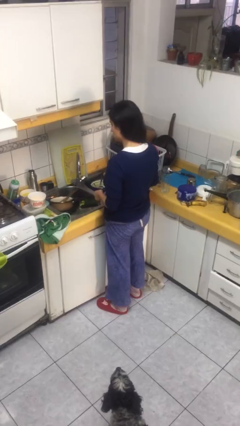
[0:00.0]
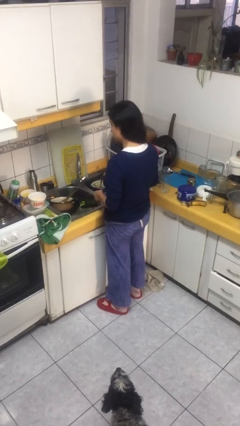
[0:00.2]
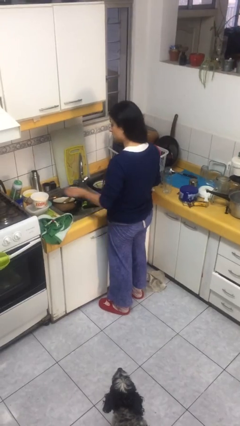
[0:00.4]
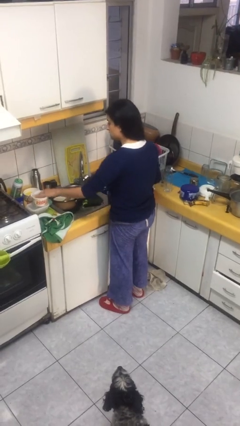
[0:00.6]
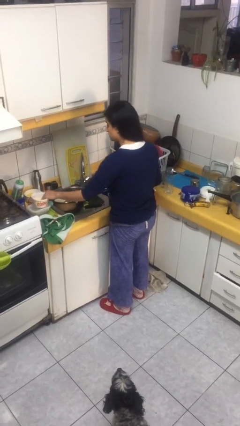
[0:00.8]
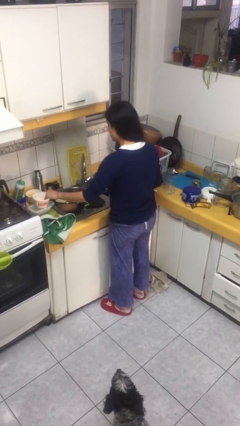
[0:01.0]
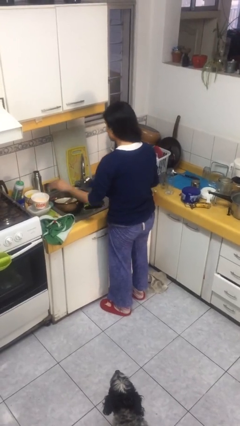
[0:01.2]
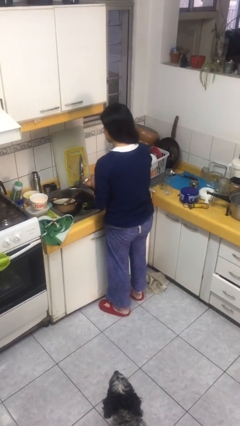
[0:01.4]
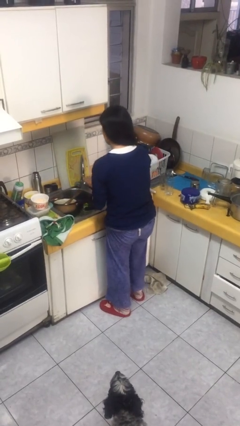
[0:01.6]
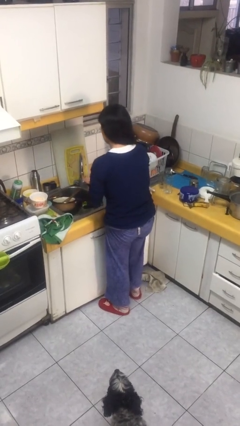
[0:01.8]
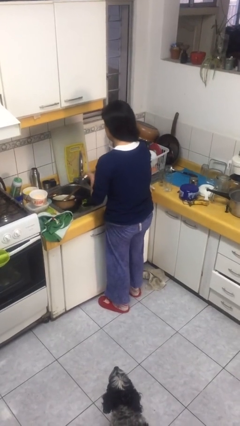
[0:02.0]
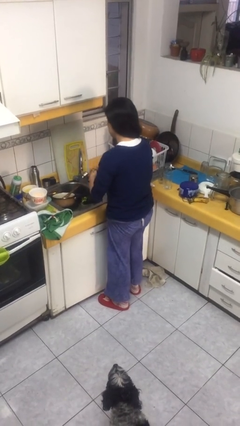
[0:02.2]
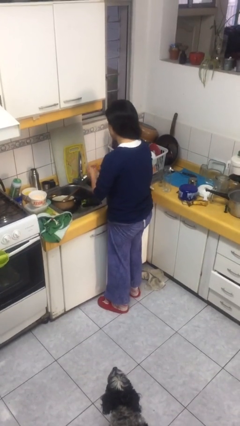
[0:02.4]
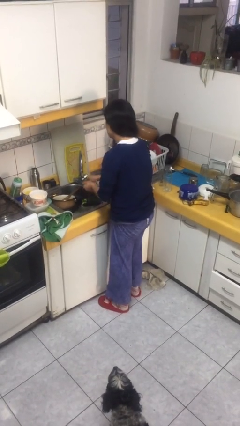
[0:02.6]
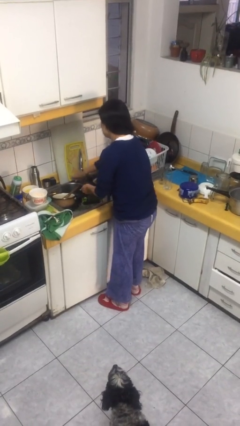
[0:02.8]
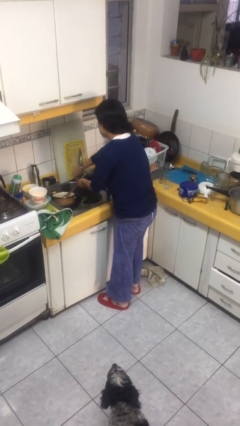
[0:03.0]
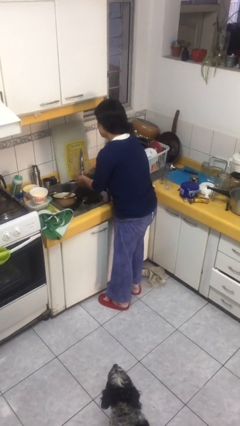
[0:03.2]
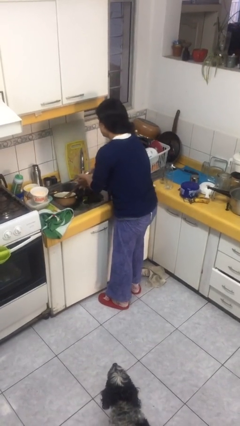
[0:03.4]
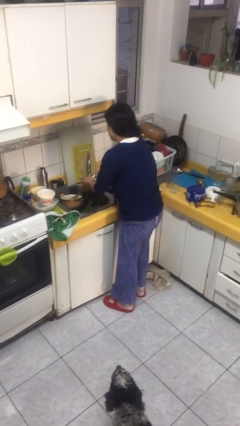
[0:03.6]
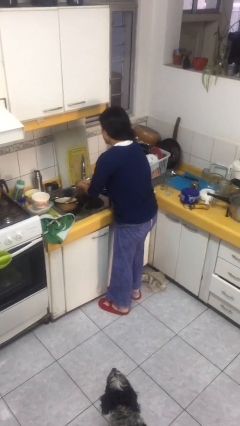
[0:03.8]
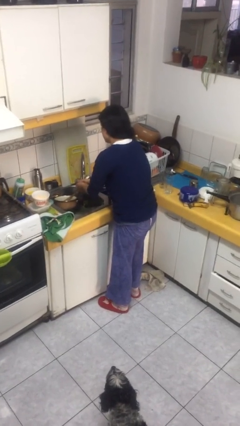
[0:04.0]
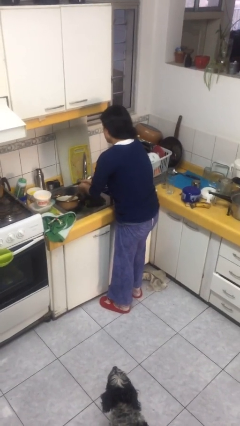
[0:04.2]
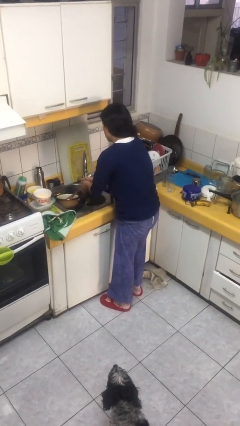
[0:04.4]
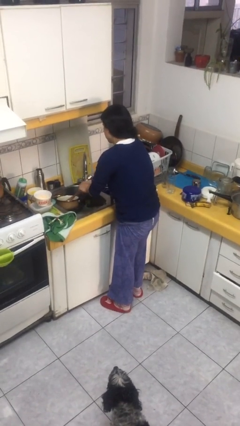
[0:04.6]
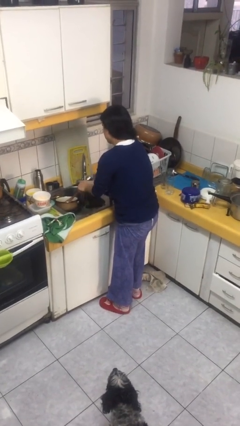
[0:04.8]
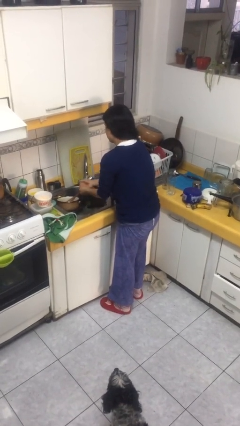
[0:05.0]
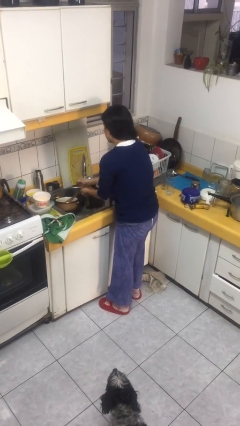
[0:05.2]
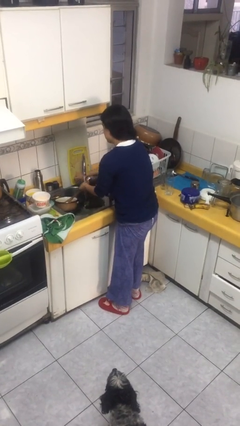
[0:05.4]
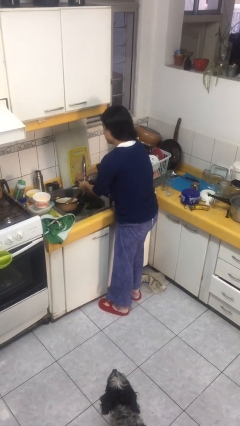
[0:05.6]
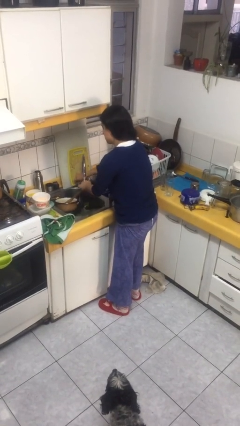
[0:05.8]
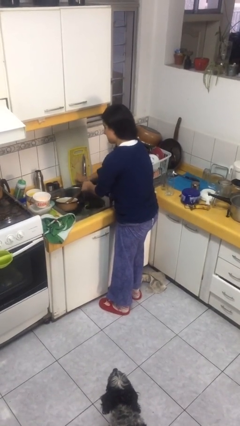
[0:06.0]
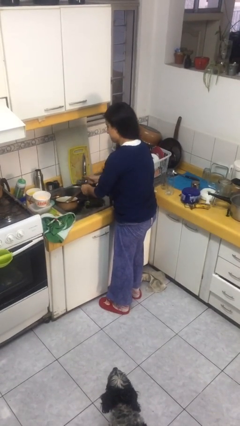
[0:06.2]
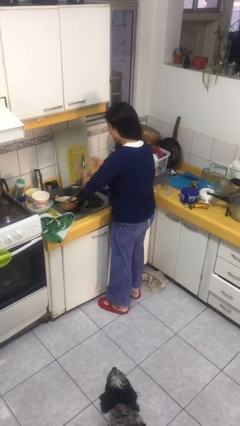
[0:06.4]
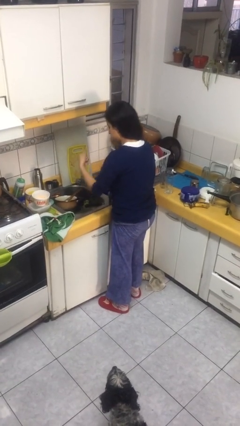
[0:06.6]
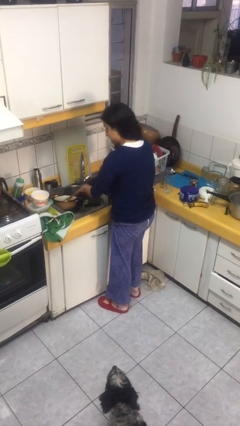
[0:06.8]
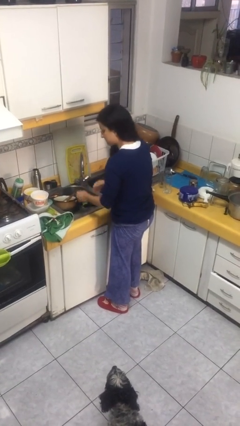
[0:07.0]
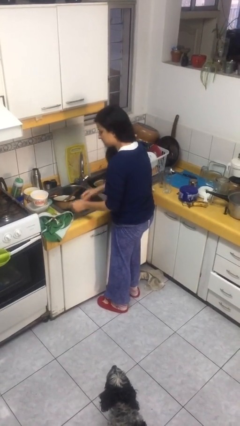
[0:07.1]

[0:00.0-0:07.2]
person washes hands

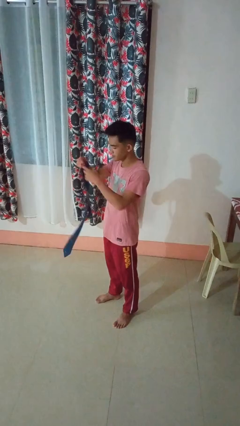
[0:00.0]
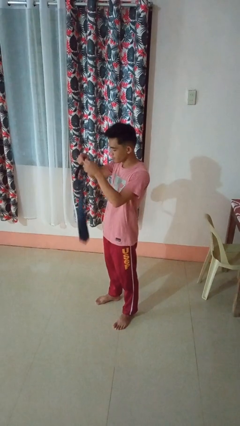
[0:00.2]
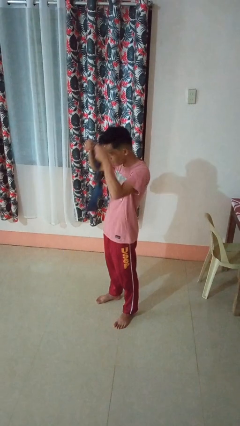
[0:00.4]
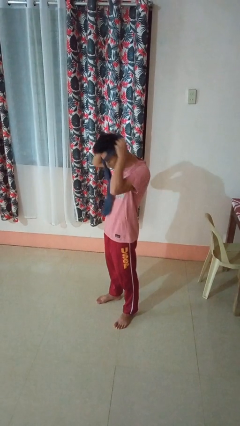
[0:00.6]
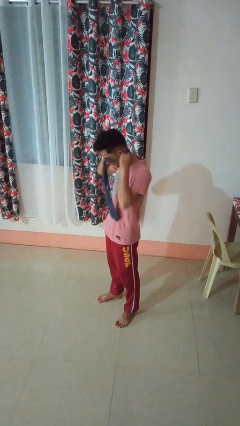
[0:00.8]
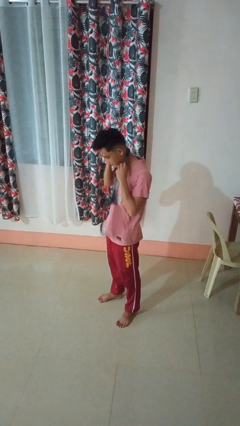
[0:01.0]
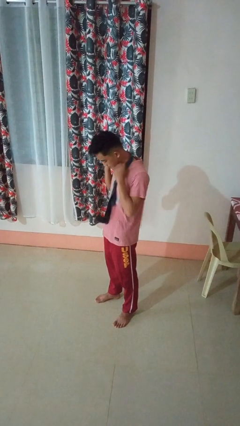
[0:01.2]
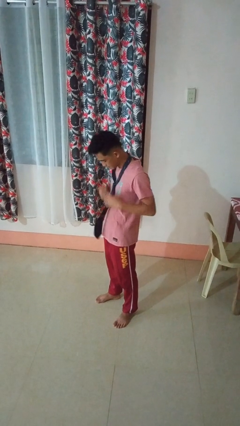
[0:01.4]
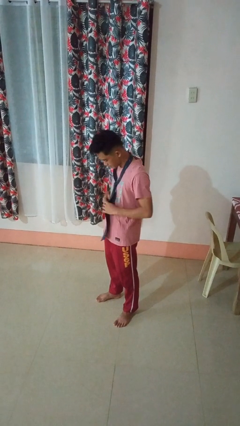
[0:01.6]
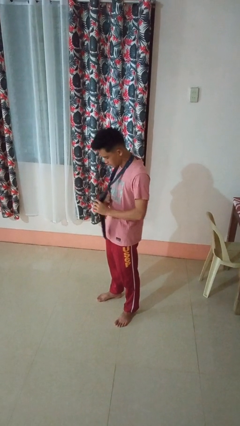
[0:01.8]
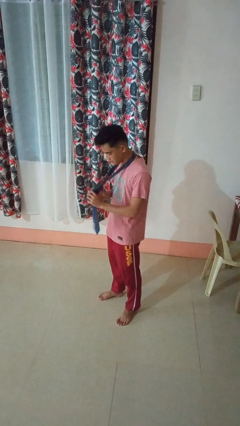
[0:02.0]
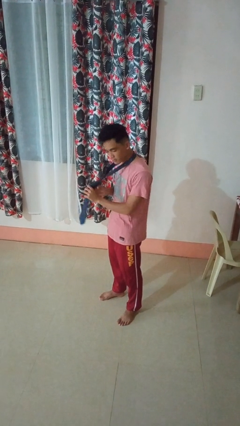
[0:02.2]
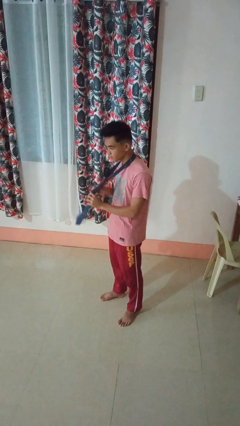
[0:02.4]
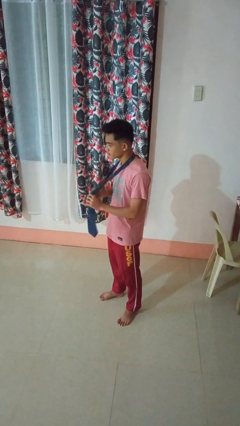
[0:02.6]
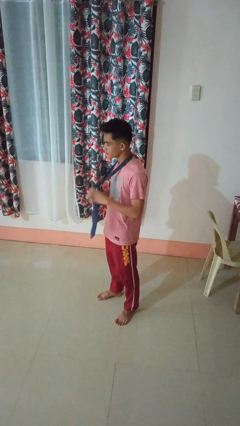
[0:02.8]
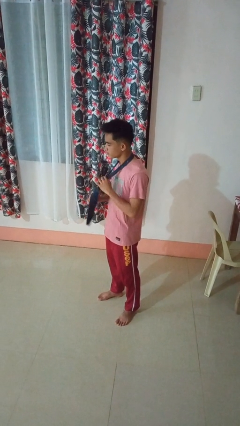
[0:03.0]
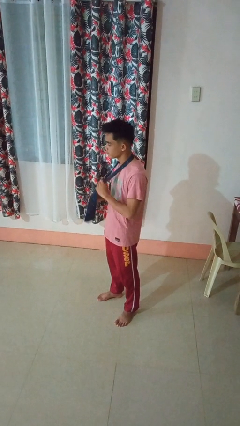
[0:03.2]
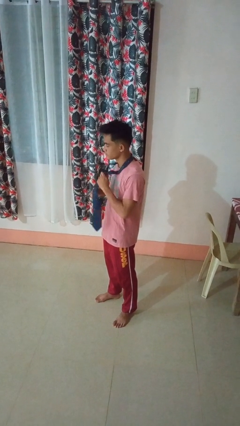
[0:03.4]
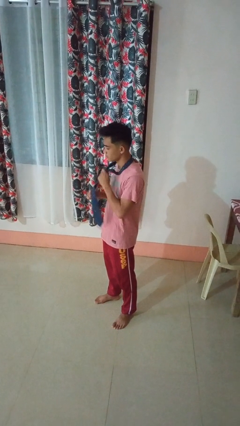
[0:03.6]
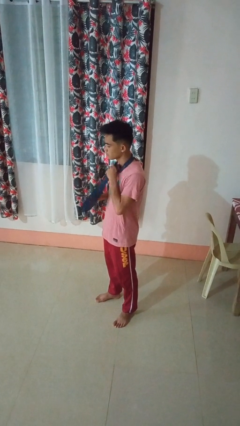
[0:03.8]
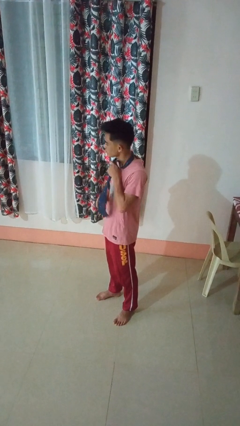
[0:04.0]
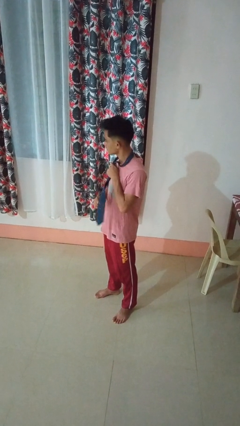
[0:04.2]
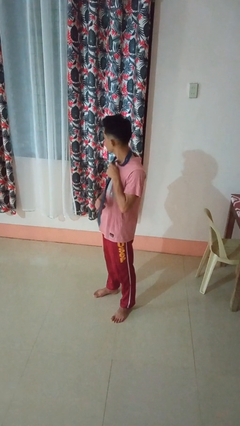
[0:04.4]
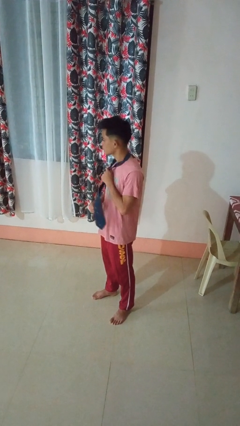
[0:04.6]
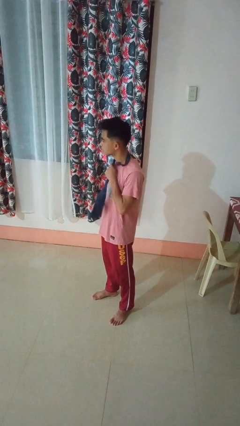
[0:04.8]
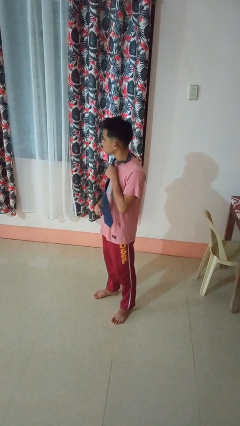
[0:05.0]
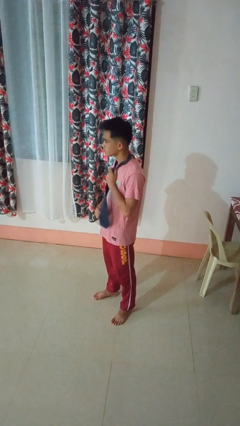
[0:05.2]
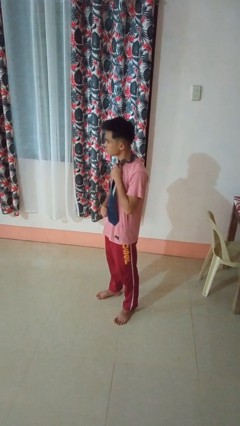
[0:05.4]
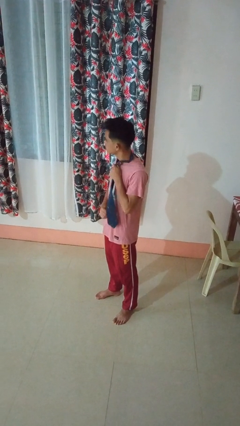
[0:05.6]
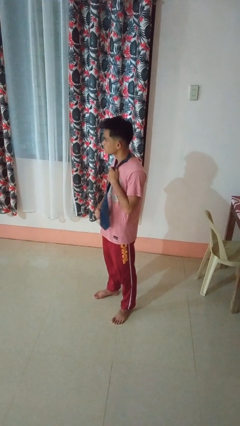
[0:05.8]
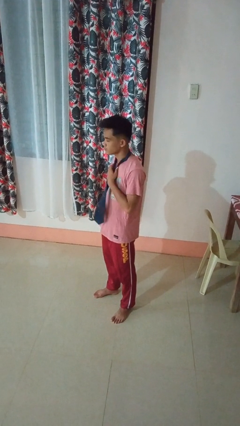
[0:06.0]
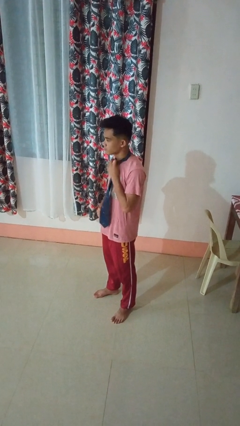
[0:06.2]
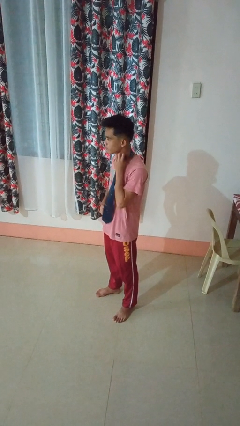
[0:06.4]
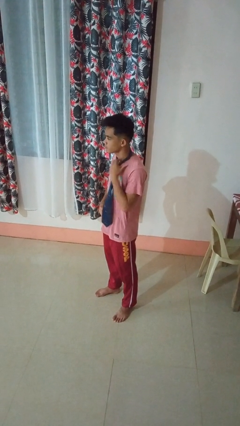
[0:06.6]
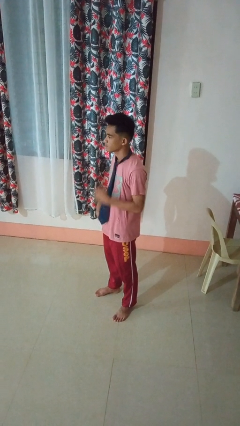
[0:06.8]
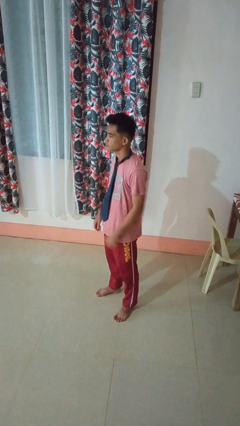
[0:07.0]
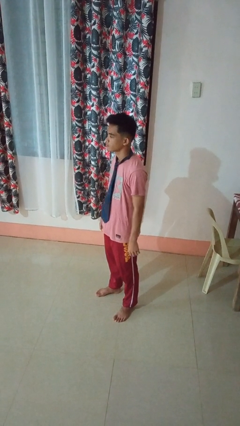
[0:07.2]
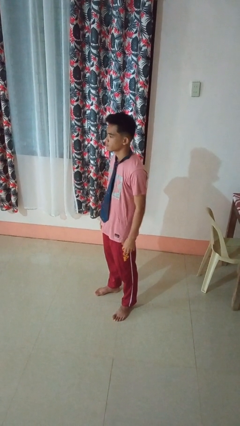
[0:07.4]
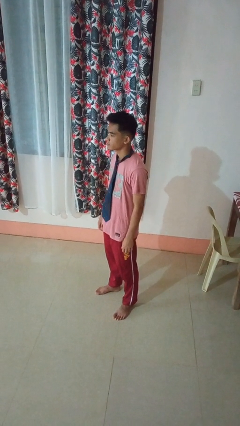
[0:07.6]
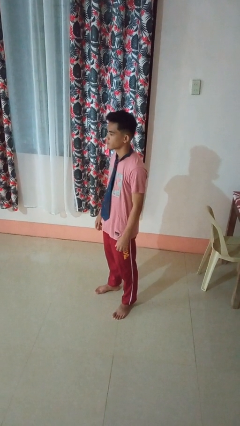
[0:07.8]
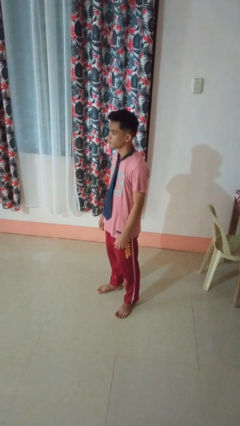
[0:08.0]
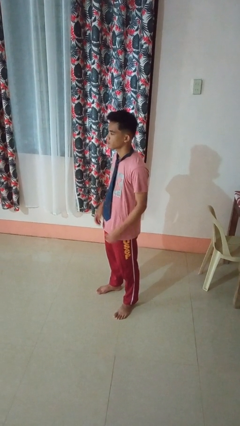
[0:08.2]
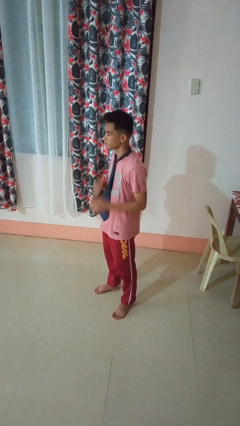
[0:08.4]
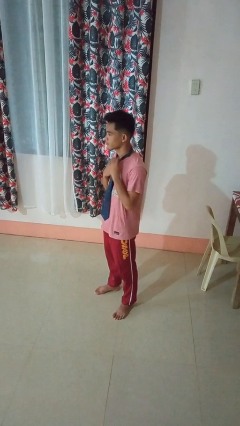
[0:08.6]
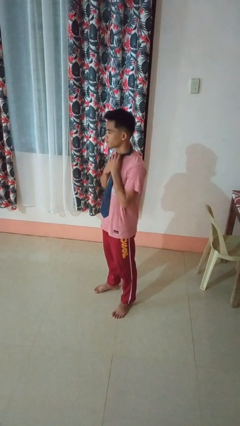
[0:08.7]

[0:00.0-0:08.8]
person puts on necktie

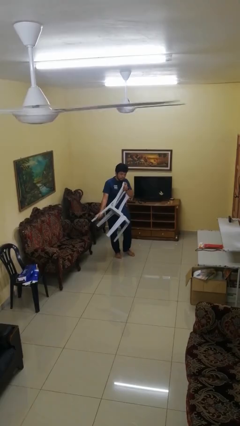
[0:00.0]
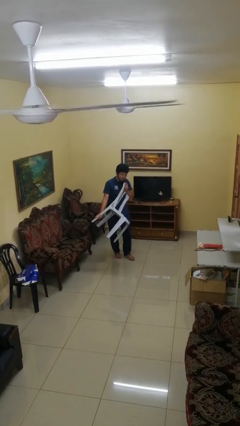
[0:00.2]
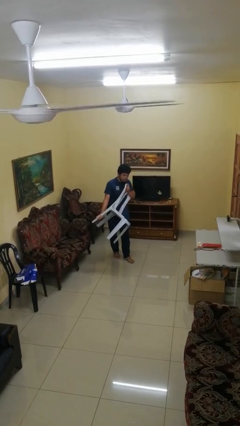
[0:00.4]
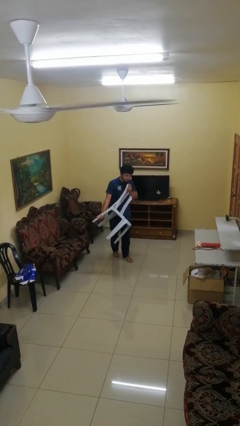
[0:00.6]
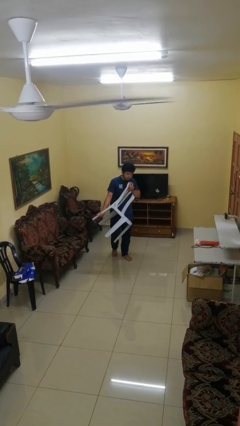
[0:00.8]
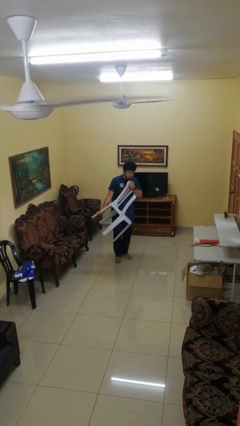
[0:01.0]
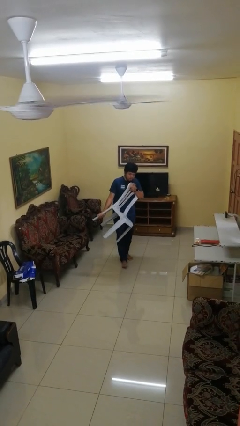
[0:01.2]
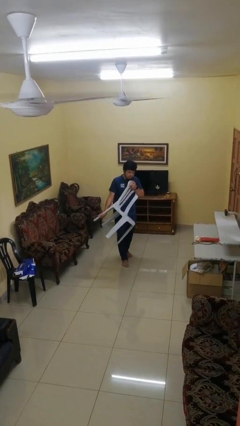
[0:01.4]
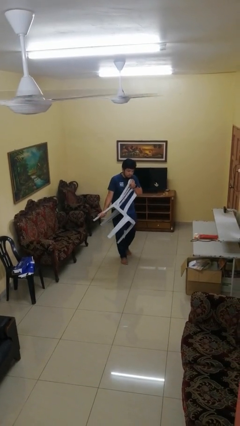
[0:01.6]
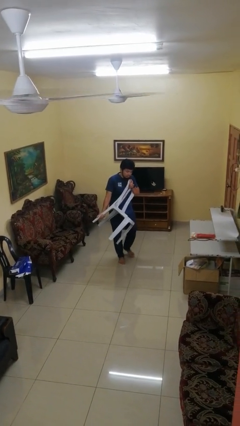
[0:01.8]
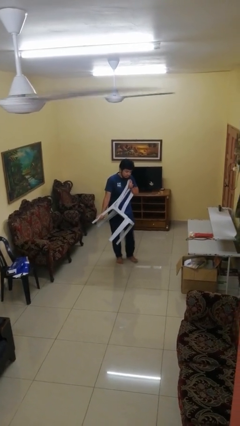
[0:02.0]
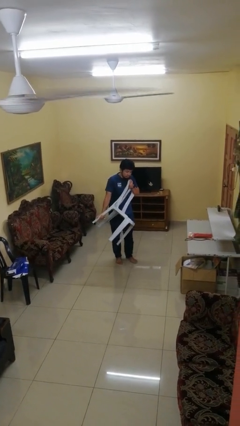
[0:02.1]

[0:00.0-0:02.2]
person carries furniture
